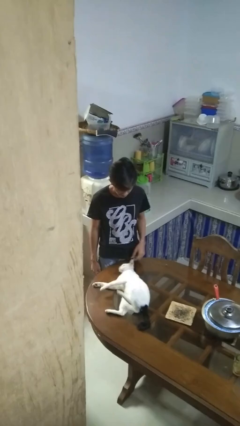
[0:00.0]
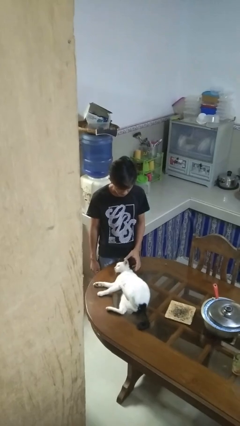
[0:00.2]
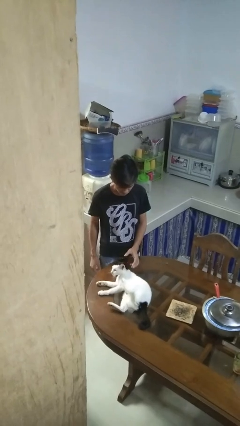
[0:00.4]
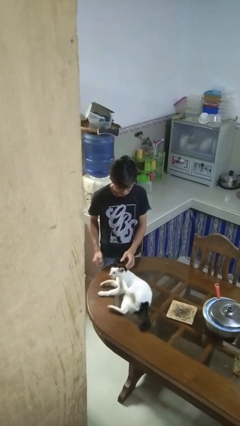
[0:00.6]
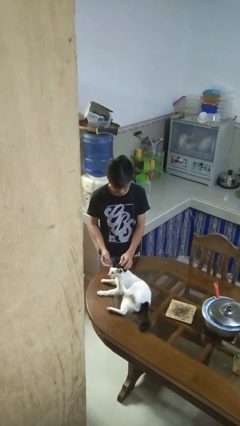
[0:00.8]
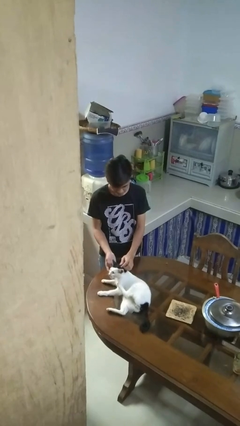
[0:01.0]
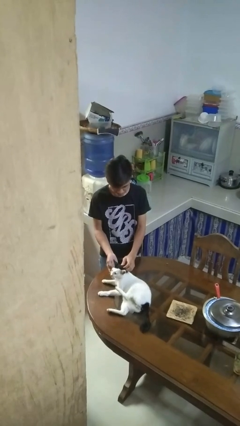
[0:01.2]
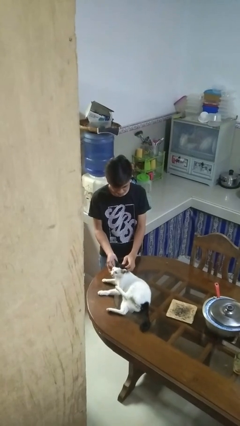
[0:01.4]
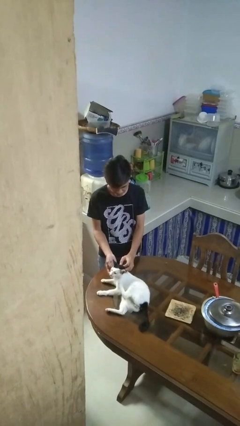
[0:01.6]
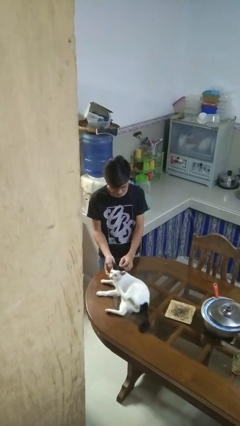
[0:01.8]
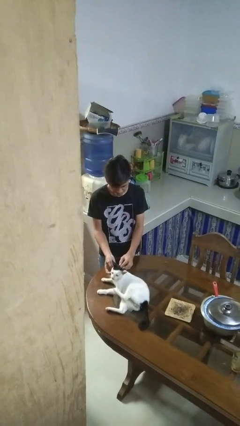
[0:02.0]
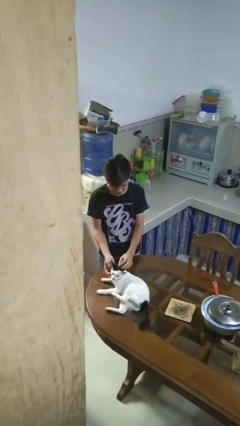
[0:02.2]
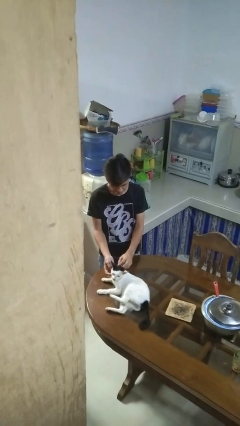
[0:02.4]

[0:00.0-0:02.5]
person pets cat

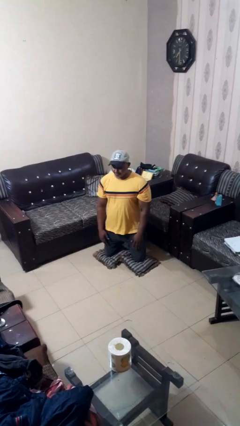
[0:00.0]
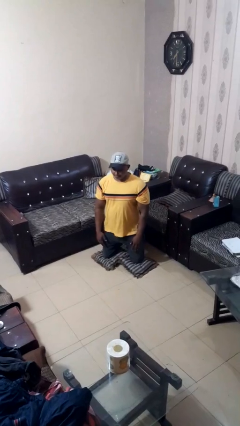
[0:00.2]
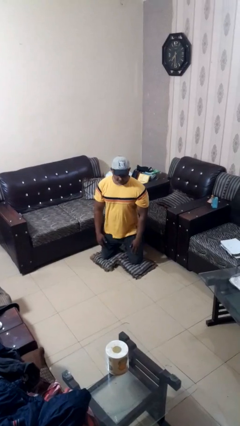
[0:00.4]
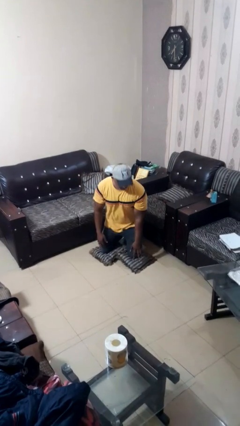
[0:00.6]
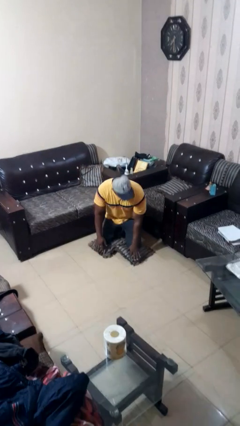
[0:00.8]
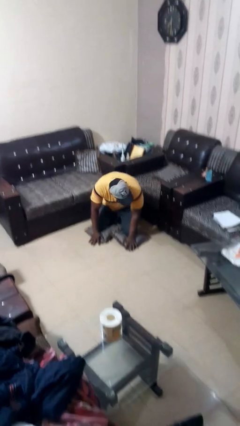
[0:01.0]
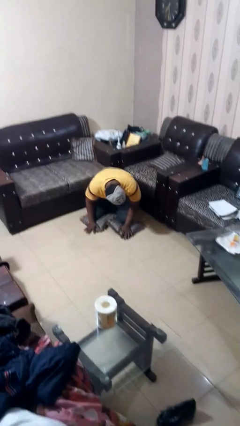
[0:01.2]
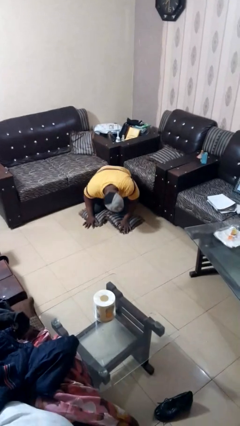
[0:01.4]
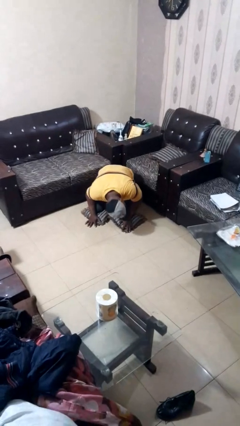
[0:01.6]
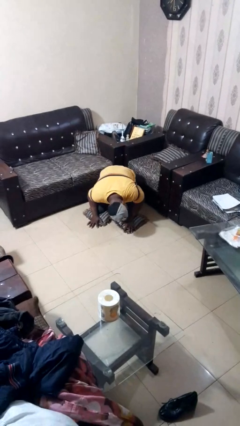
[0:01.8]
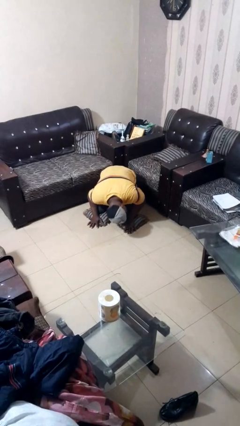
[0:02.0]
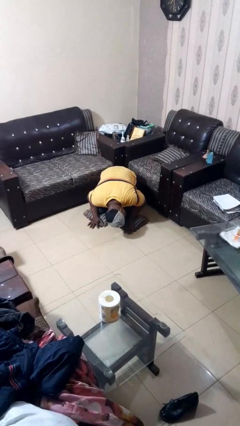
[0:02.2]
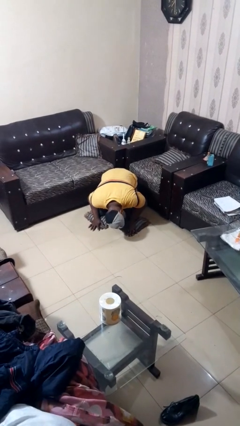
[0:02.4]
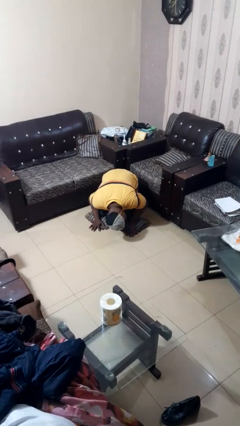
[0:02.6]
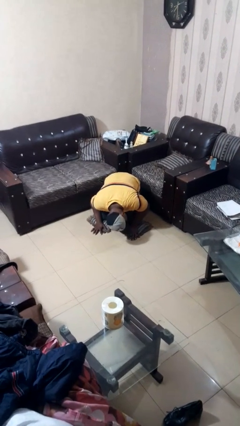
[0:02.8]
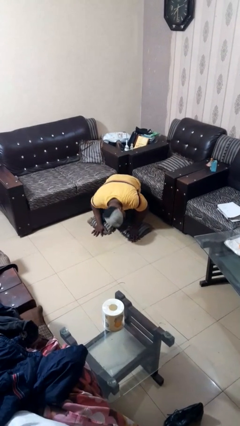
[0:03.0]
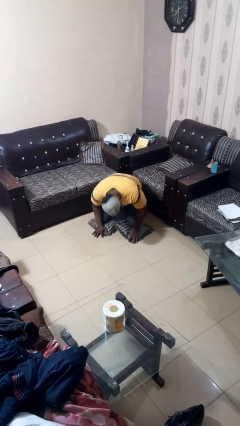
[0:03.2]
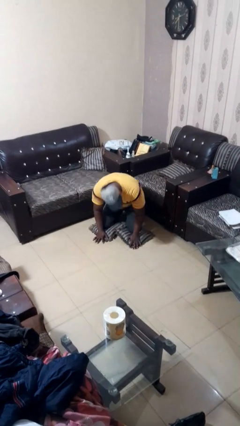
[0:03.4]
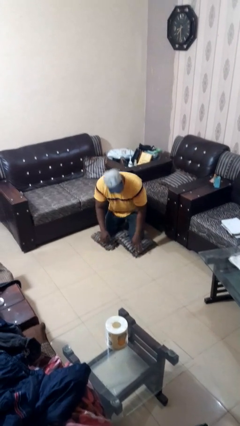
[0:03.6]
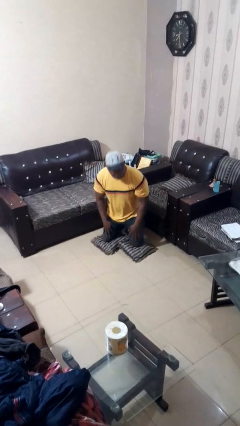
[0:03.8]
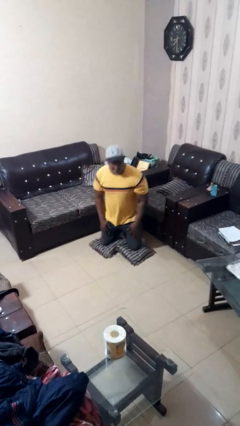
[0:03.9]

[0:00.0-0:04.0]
person searches under couch

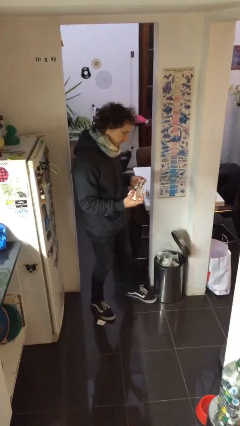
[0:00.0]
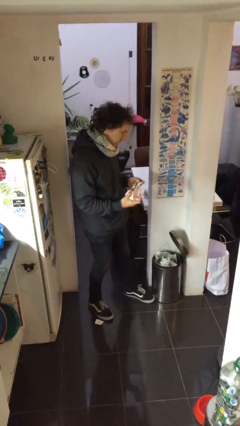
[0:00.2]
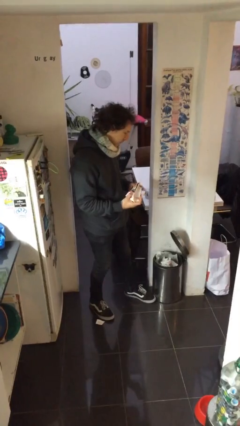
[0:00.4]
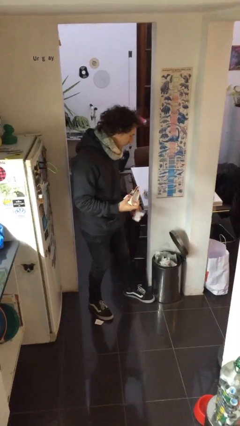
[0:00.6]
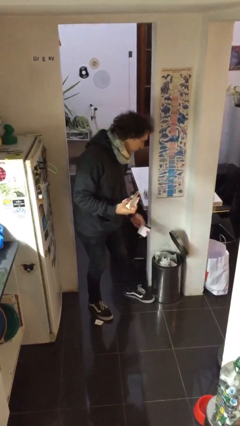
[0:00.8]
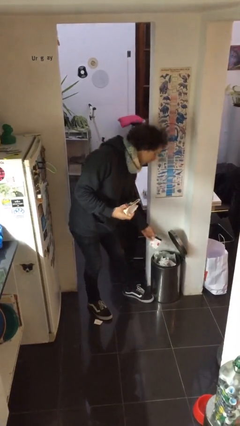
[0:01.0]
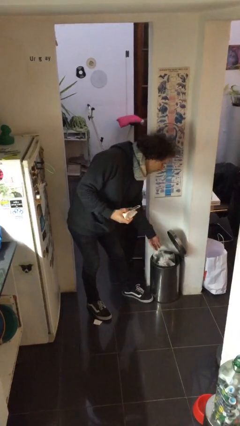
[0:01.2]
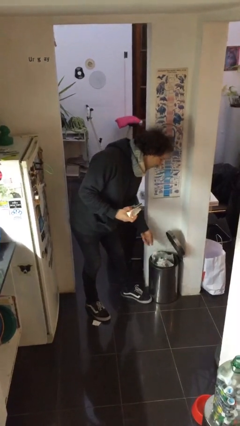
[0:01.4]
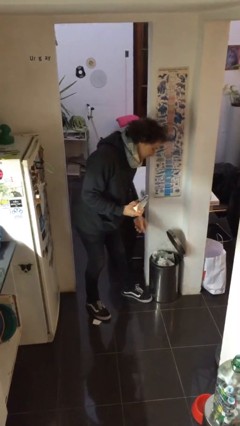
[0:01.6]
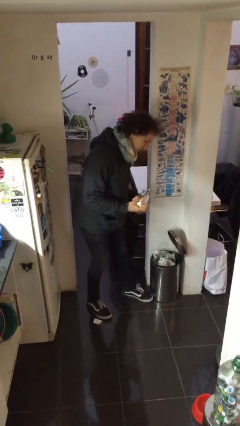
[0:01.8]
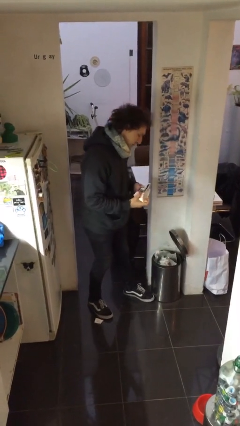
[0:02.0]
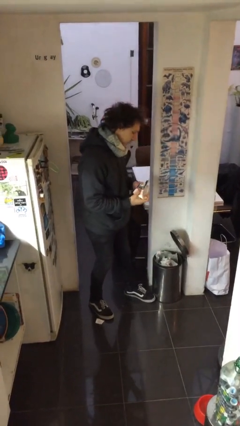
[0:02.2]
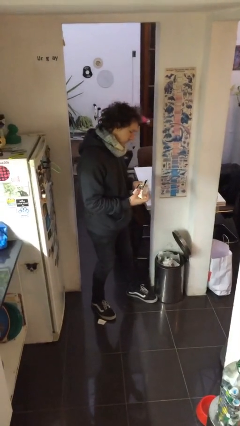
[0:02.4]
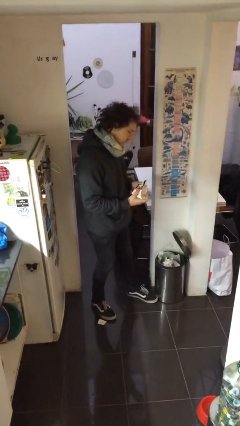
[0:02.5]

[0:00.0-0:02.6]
person discards trash

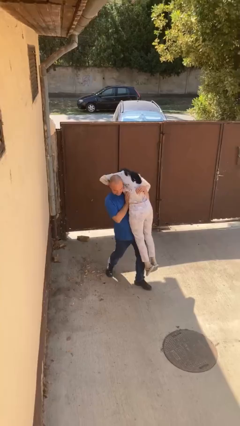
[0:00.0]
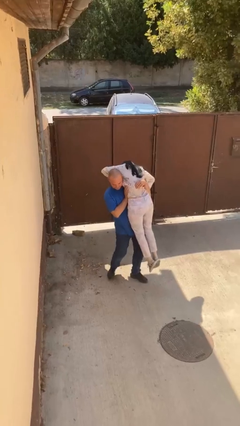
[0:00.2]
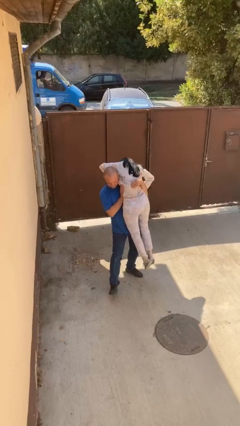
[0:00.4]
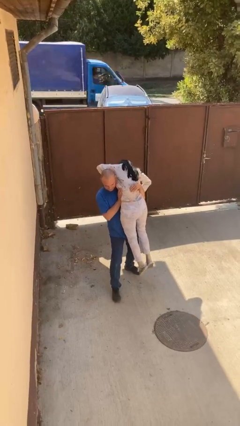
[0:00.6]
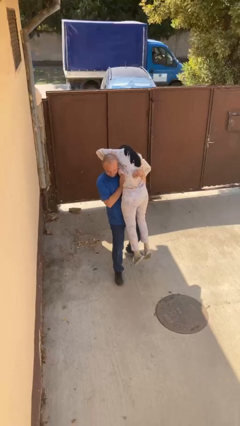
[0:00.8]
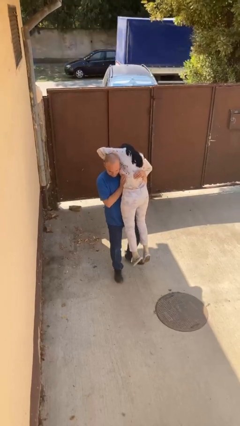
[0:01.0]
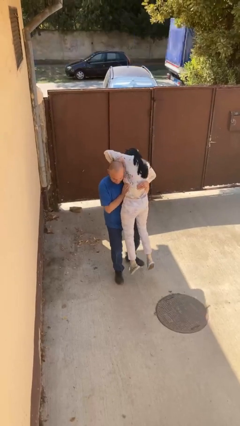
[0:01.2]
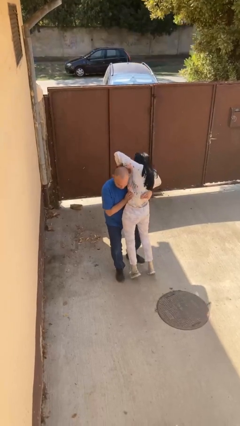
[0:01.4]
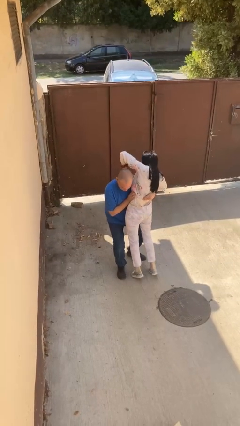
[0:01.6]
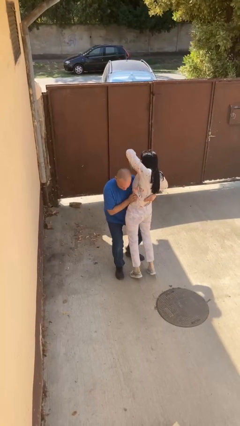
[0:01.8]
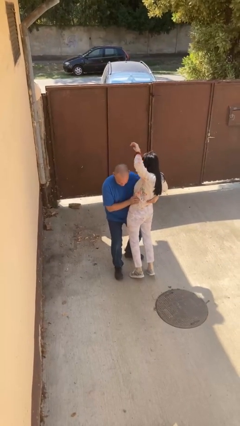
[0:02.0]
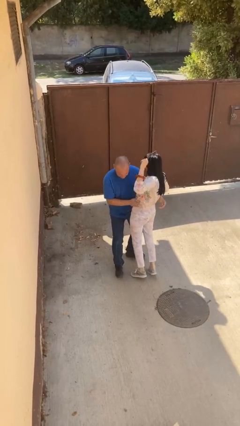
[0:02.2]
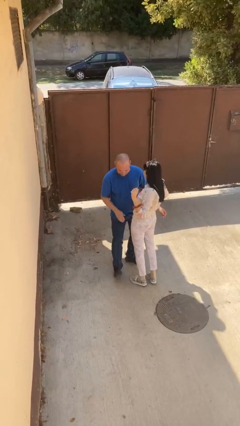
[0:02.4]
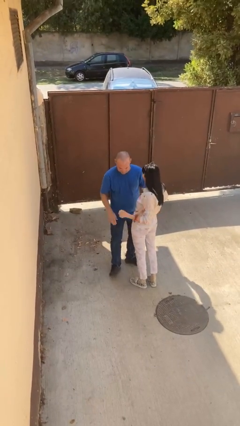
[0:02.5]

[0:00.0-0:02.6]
person puts down person

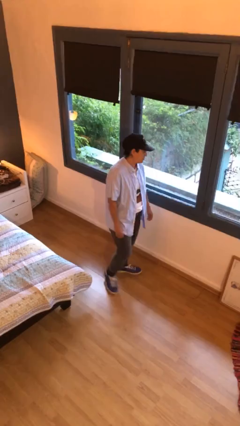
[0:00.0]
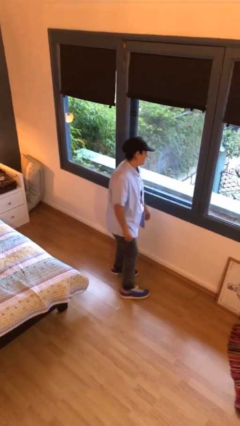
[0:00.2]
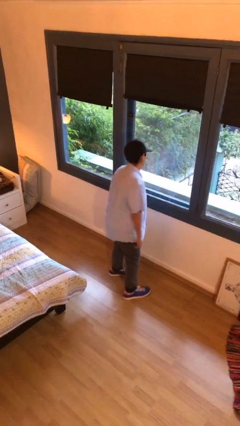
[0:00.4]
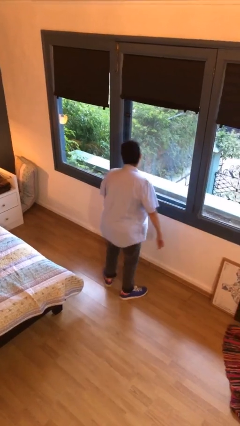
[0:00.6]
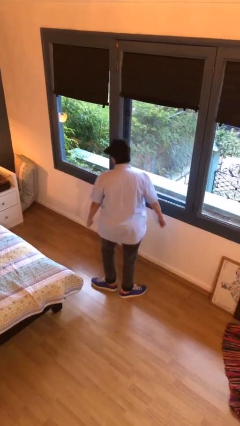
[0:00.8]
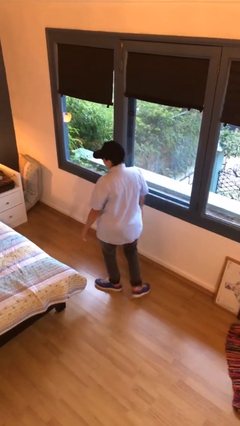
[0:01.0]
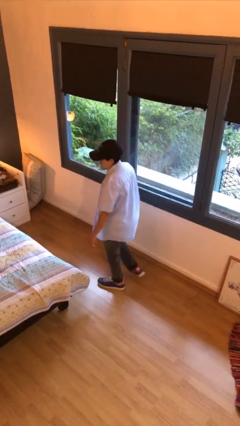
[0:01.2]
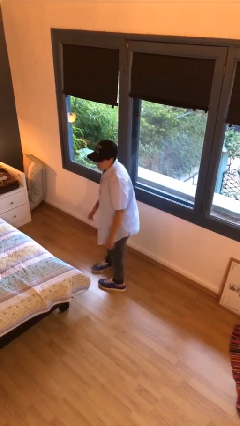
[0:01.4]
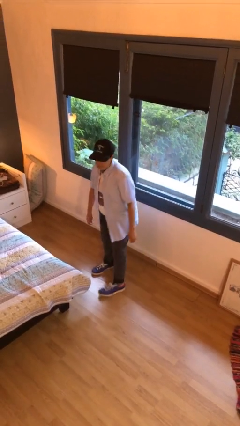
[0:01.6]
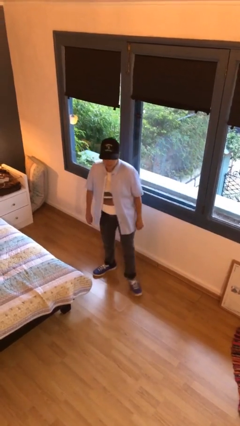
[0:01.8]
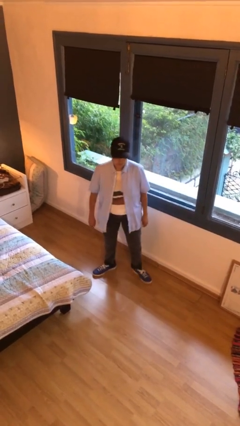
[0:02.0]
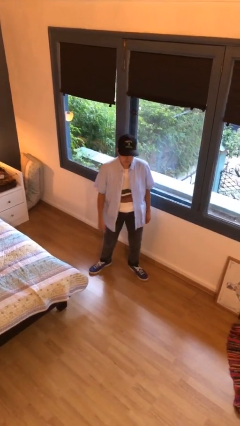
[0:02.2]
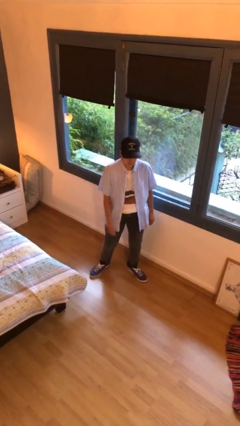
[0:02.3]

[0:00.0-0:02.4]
person twirls

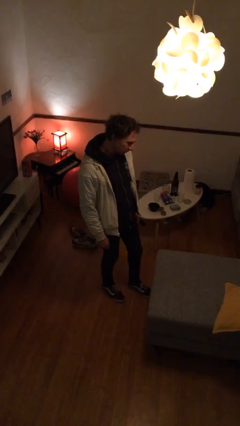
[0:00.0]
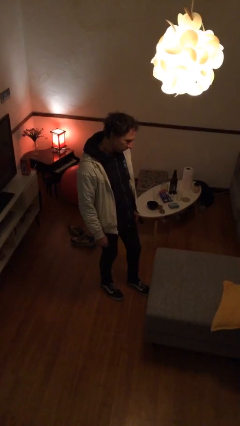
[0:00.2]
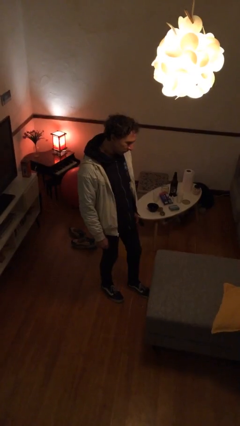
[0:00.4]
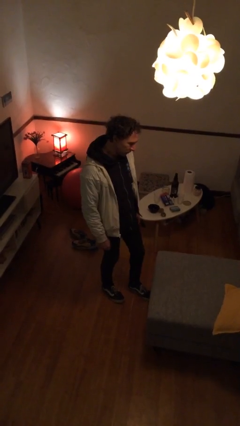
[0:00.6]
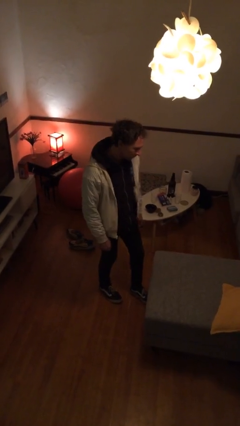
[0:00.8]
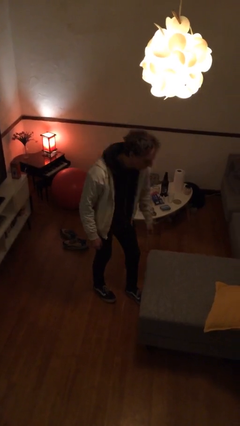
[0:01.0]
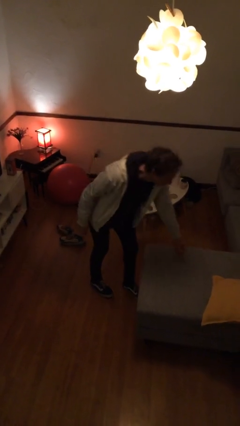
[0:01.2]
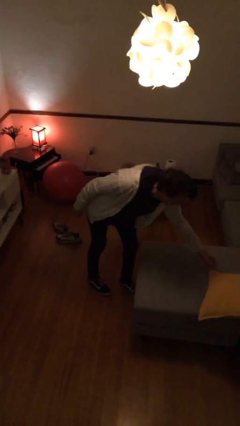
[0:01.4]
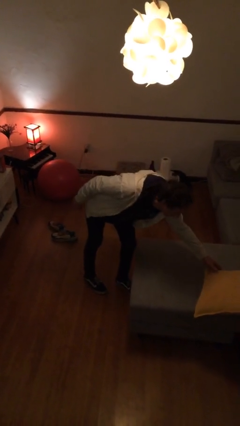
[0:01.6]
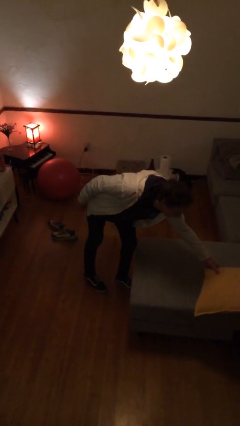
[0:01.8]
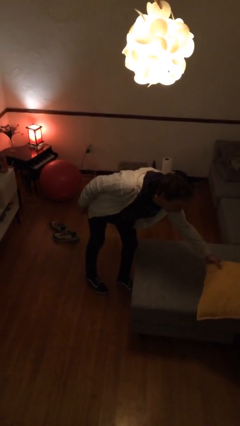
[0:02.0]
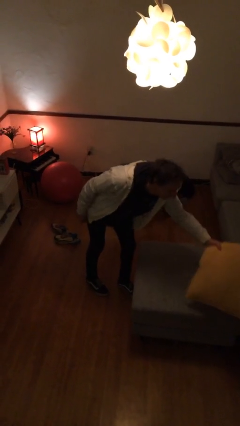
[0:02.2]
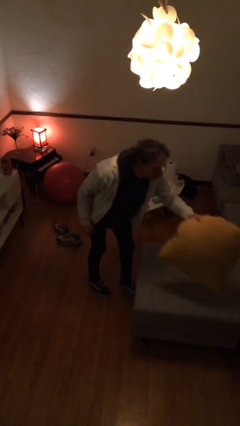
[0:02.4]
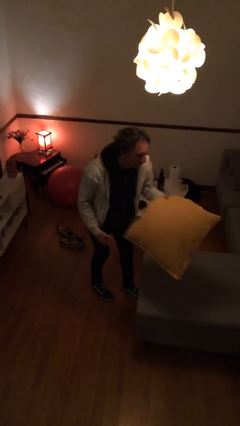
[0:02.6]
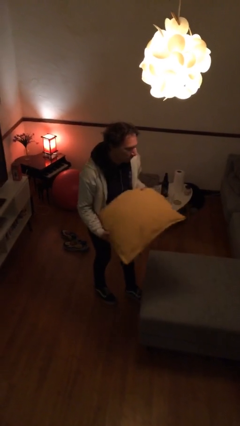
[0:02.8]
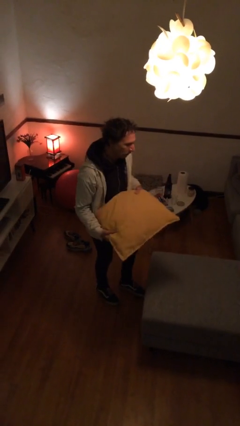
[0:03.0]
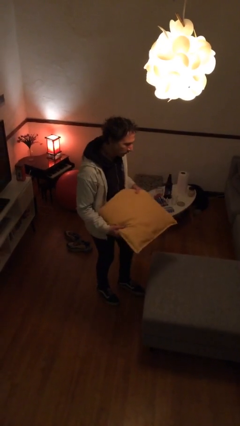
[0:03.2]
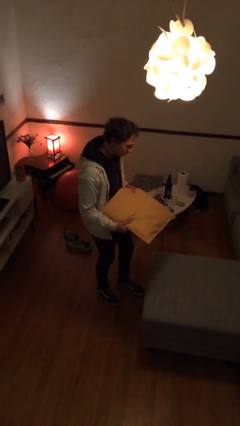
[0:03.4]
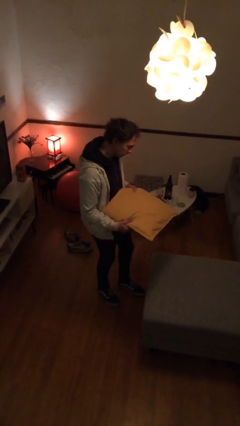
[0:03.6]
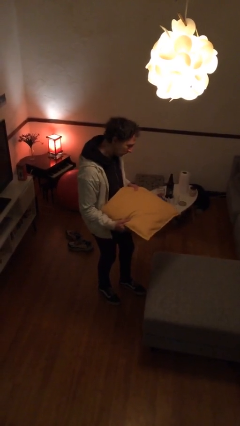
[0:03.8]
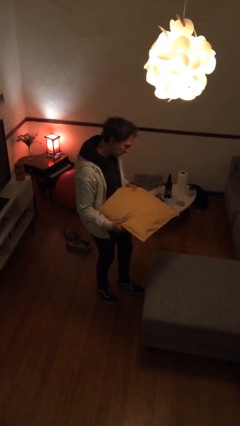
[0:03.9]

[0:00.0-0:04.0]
person picks up object from couch
